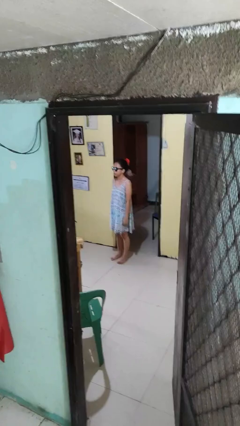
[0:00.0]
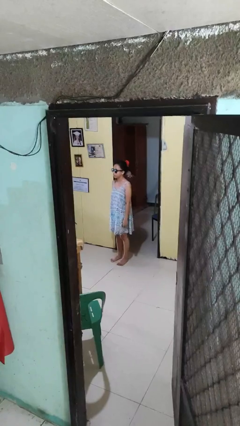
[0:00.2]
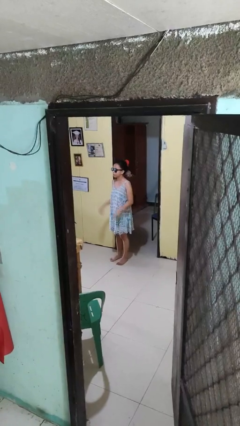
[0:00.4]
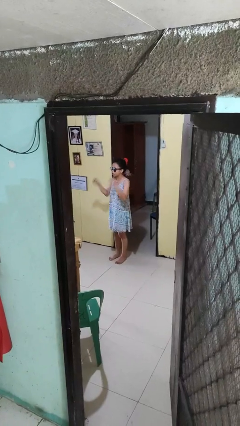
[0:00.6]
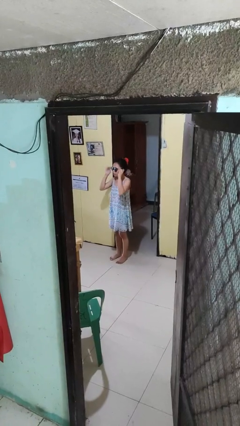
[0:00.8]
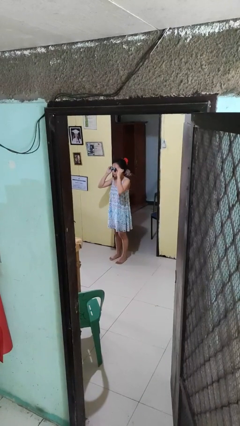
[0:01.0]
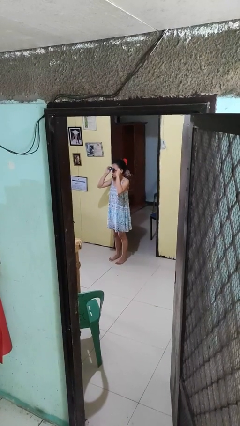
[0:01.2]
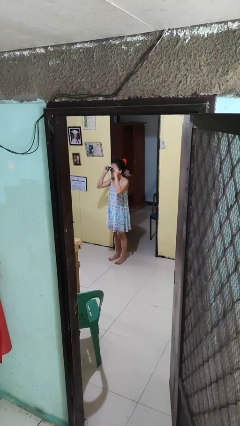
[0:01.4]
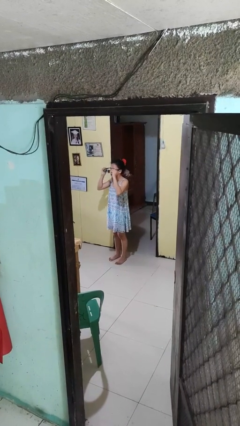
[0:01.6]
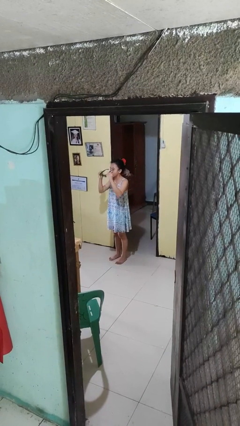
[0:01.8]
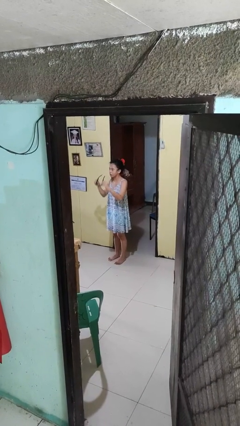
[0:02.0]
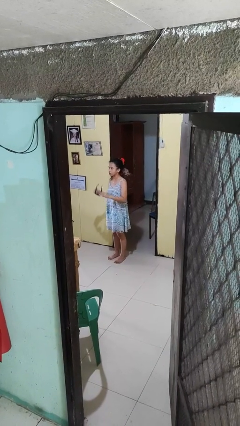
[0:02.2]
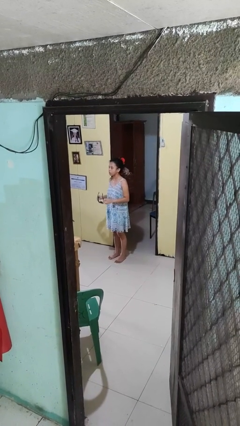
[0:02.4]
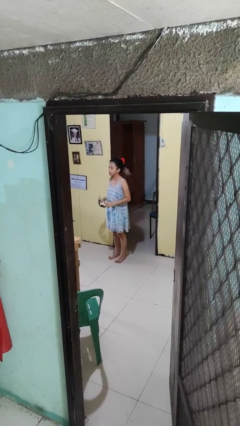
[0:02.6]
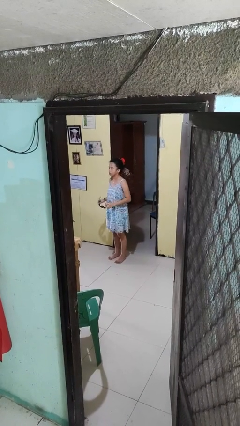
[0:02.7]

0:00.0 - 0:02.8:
person takes off sunglasses

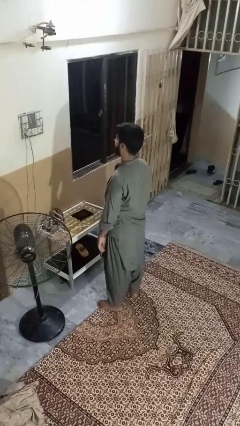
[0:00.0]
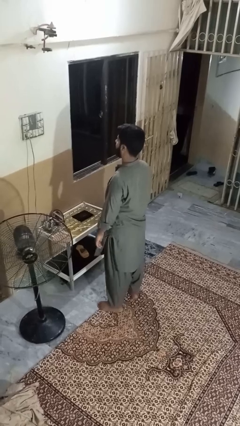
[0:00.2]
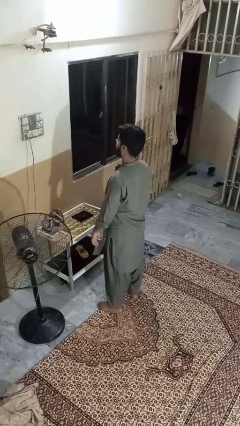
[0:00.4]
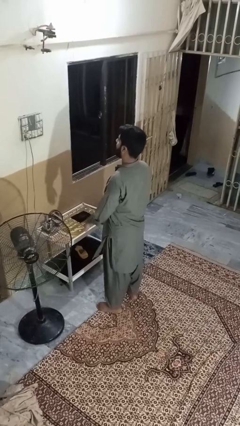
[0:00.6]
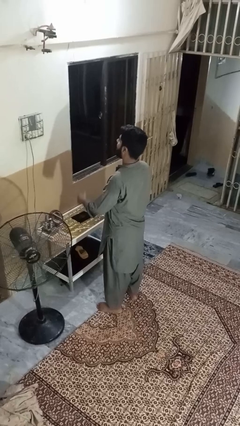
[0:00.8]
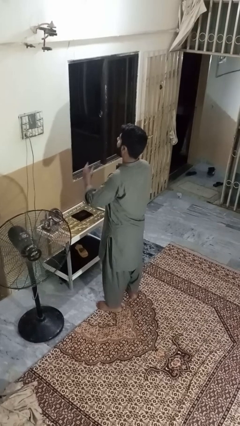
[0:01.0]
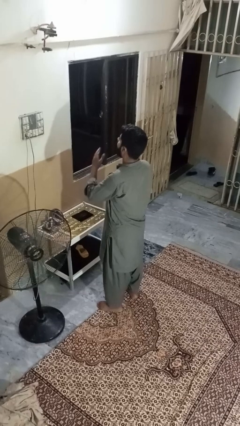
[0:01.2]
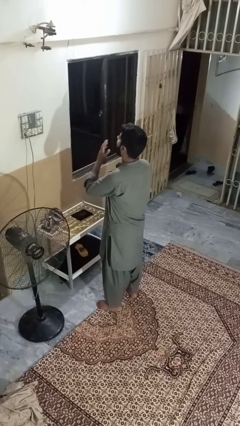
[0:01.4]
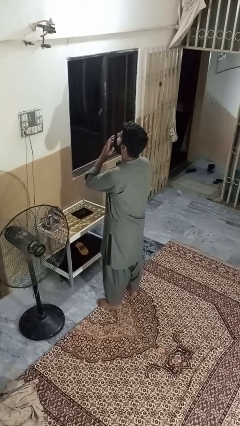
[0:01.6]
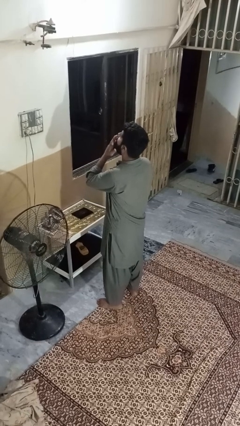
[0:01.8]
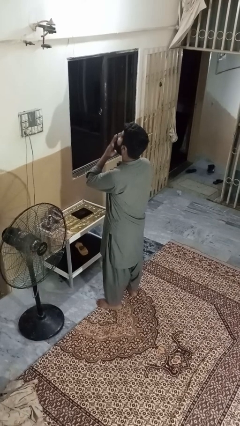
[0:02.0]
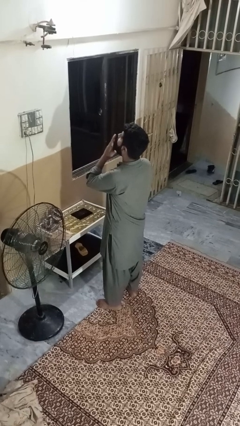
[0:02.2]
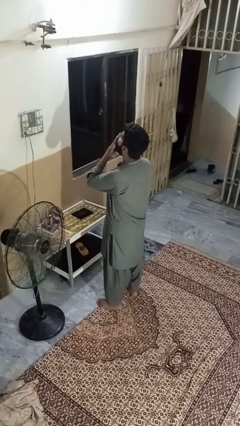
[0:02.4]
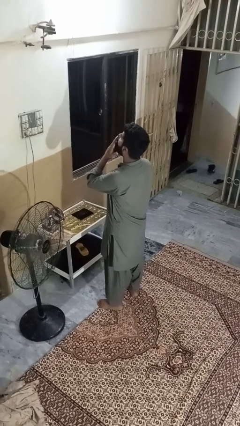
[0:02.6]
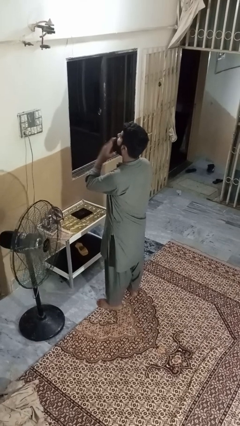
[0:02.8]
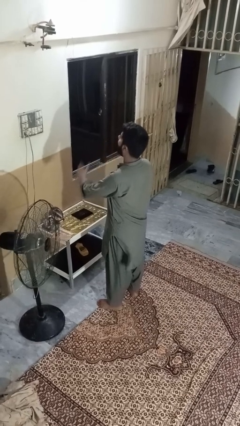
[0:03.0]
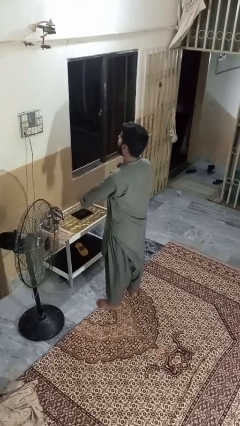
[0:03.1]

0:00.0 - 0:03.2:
person yawns

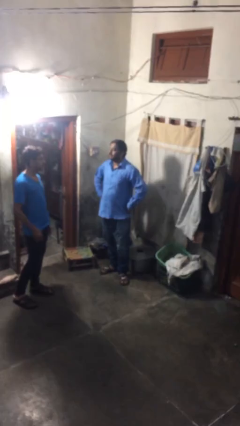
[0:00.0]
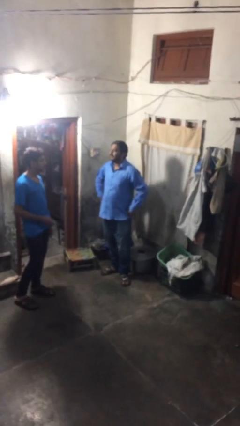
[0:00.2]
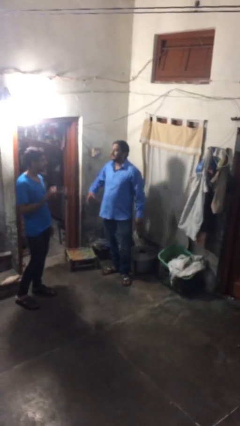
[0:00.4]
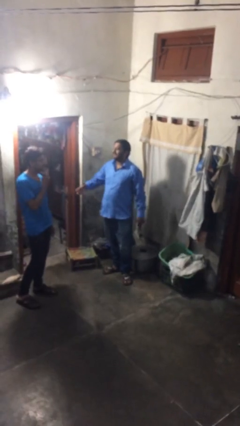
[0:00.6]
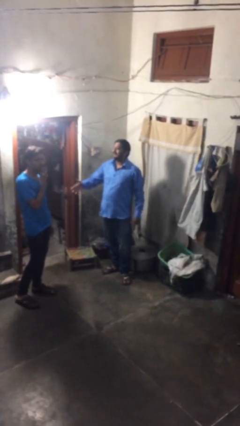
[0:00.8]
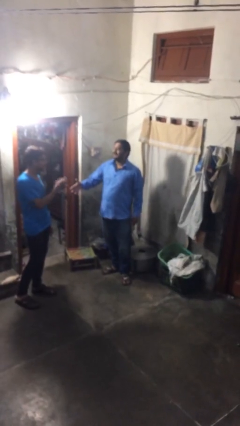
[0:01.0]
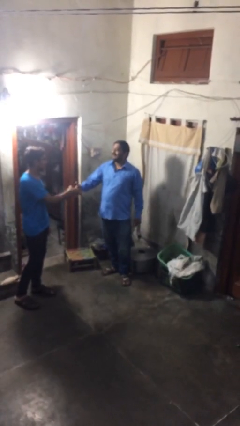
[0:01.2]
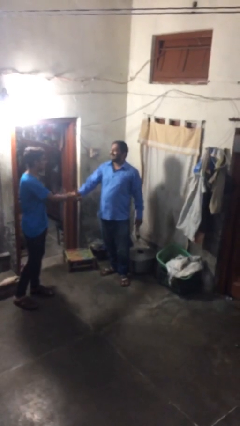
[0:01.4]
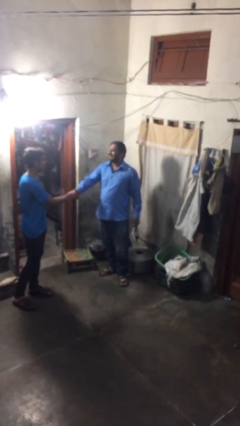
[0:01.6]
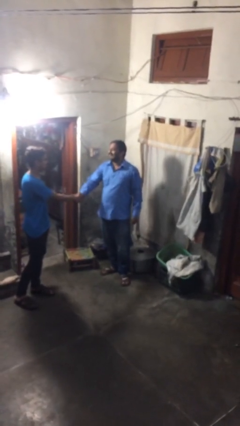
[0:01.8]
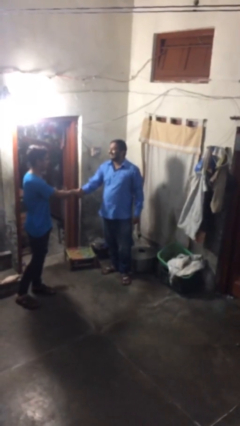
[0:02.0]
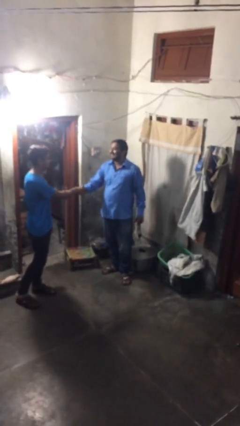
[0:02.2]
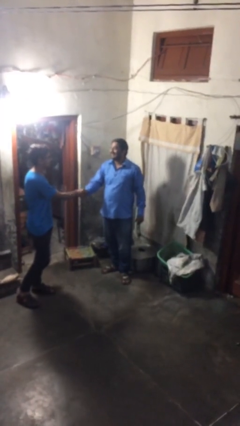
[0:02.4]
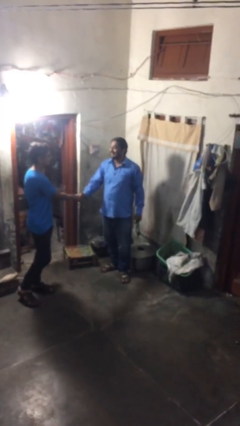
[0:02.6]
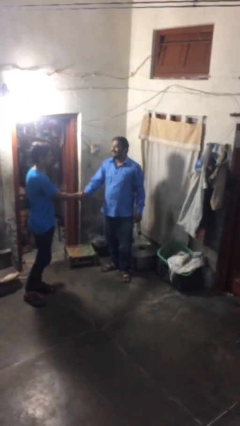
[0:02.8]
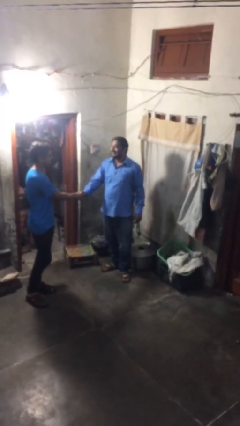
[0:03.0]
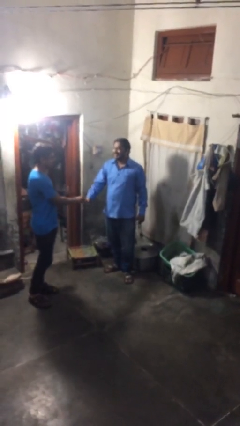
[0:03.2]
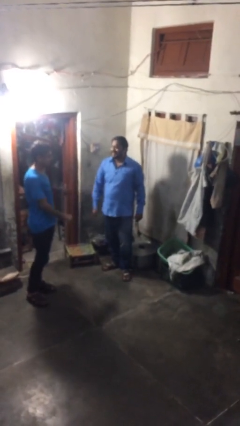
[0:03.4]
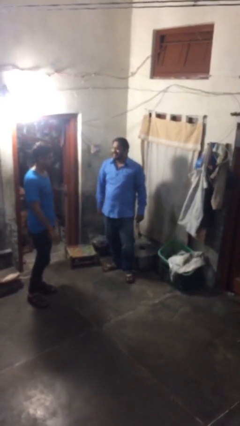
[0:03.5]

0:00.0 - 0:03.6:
person shakes hand

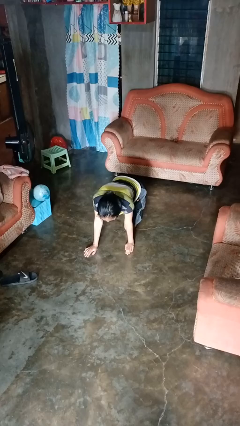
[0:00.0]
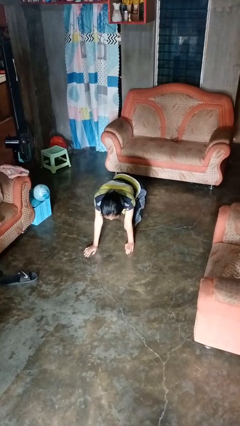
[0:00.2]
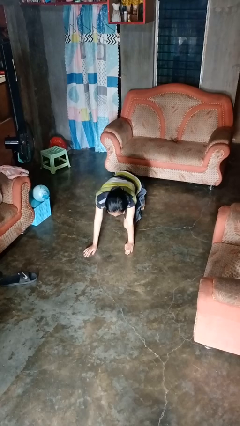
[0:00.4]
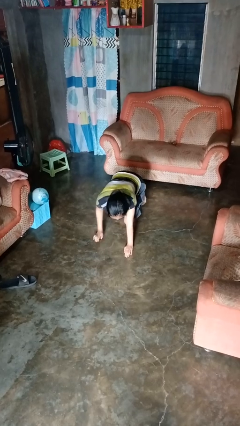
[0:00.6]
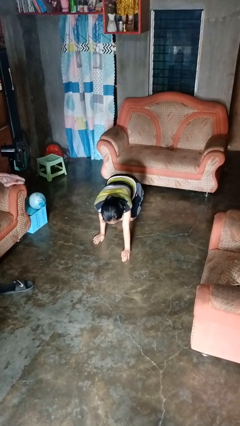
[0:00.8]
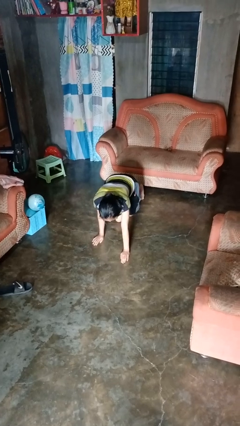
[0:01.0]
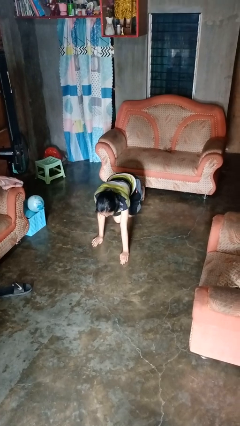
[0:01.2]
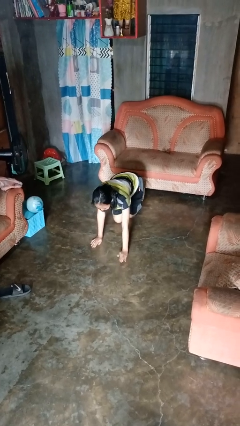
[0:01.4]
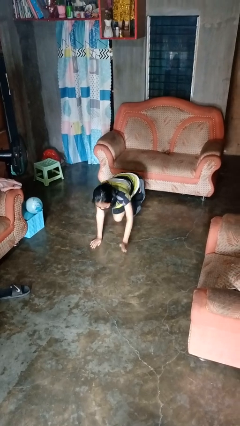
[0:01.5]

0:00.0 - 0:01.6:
person crawls

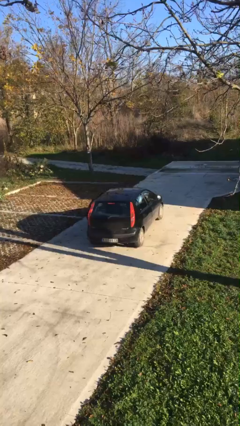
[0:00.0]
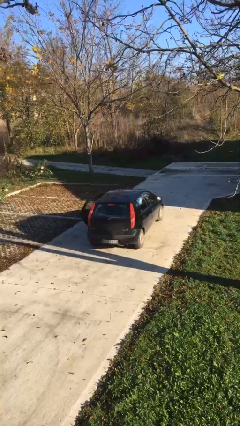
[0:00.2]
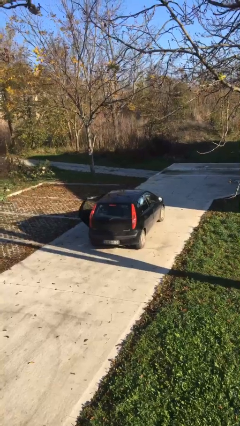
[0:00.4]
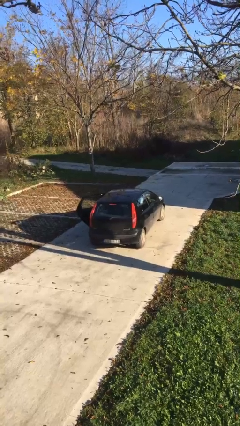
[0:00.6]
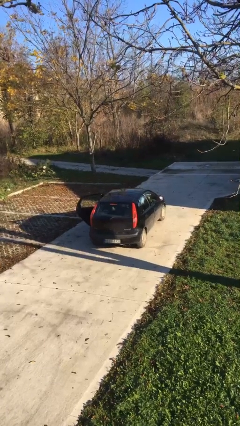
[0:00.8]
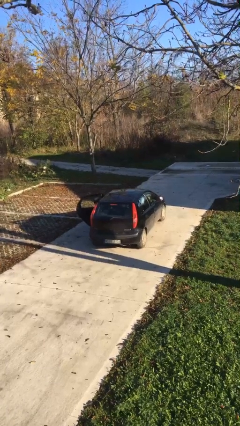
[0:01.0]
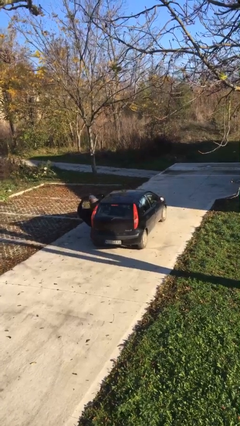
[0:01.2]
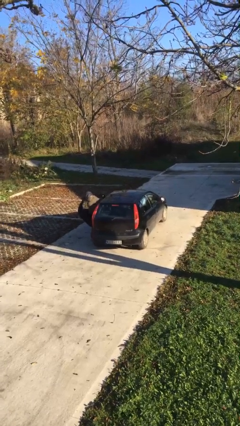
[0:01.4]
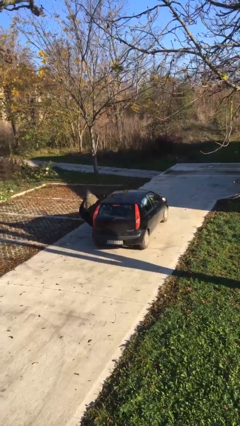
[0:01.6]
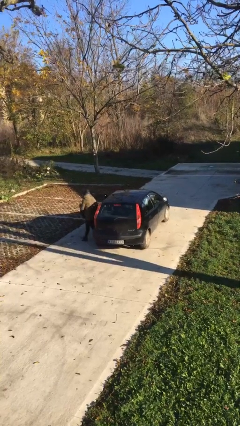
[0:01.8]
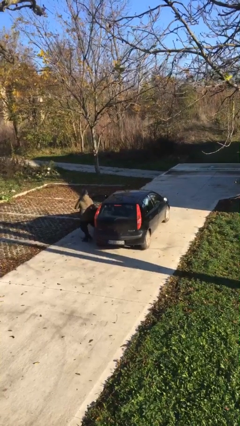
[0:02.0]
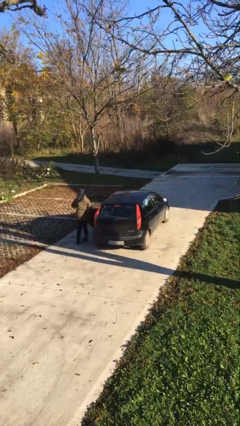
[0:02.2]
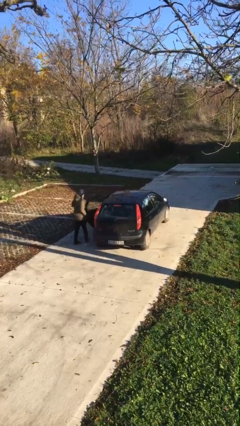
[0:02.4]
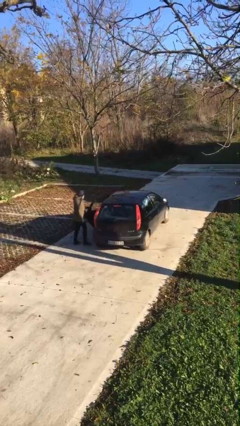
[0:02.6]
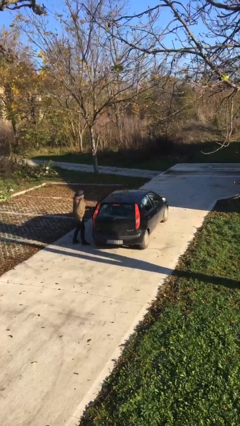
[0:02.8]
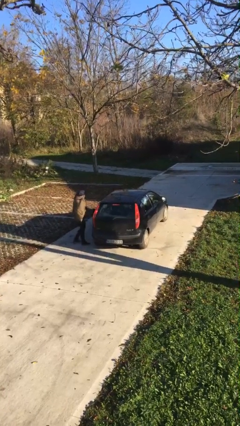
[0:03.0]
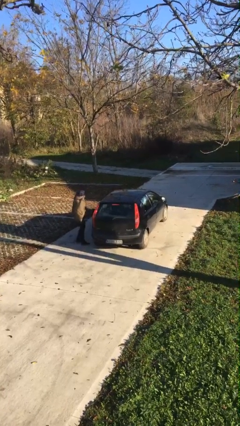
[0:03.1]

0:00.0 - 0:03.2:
car drops off person

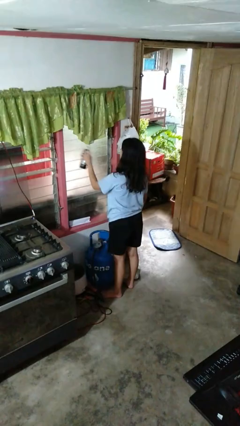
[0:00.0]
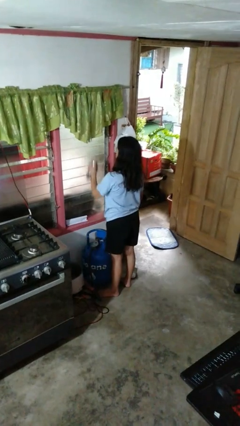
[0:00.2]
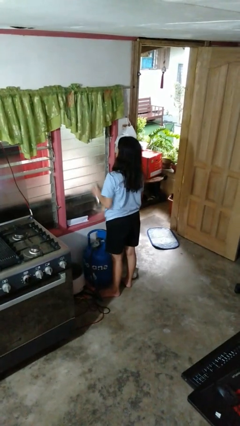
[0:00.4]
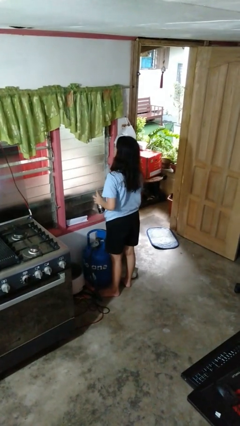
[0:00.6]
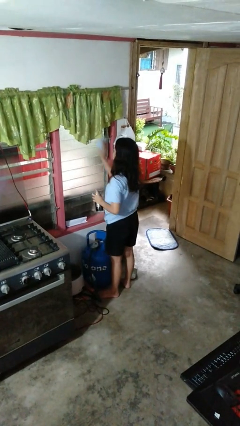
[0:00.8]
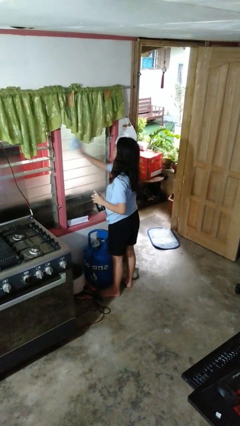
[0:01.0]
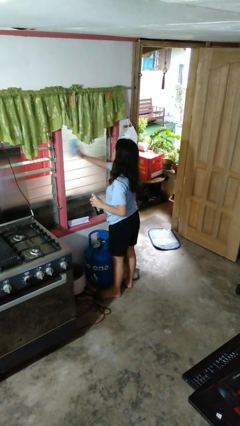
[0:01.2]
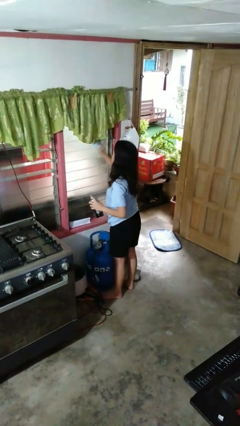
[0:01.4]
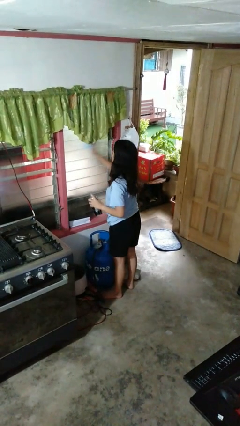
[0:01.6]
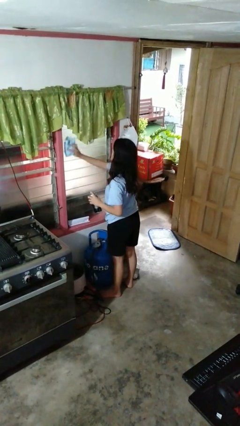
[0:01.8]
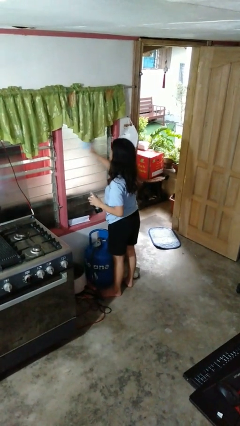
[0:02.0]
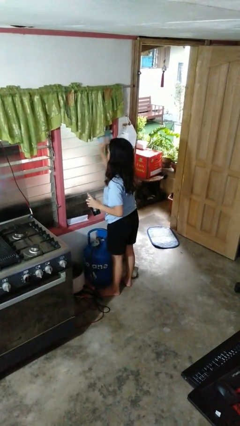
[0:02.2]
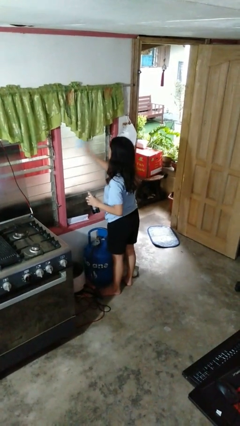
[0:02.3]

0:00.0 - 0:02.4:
person washes window

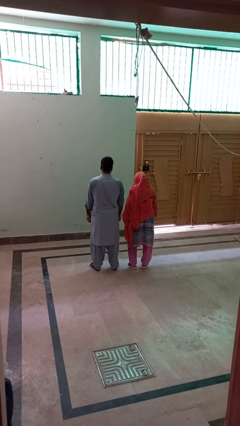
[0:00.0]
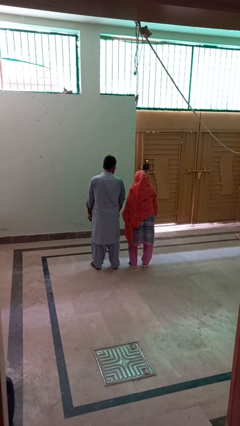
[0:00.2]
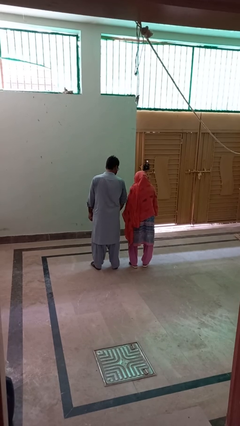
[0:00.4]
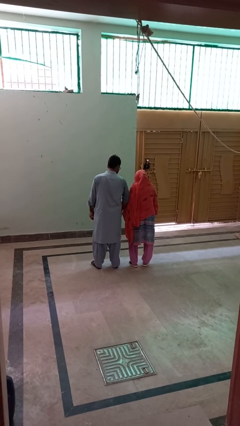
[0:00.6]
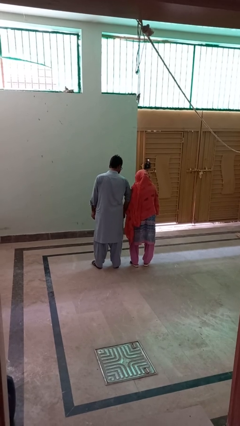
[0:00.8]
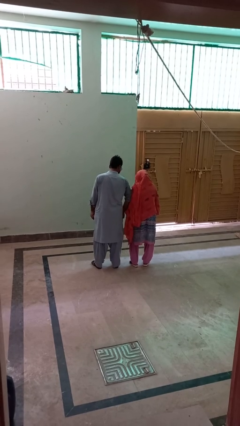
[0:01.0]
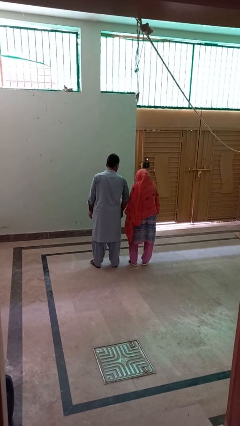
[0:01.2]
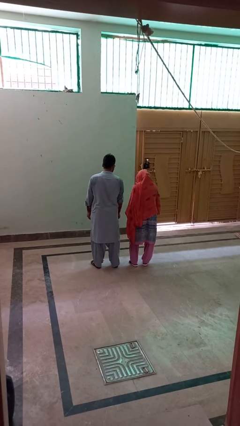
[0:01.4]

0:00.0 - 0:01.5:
person nudges person with elbow
